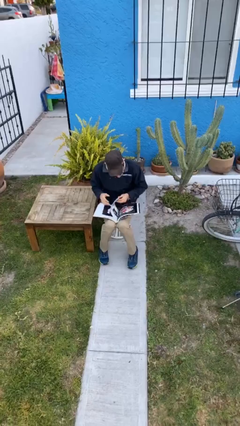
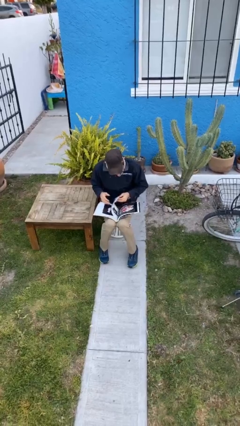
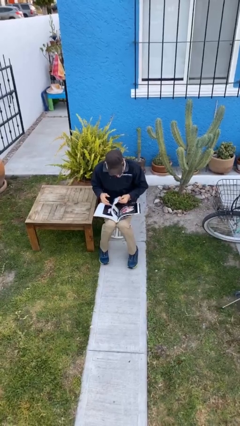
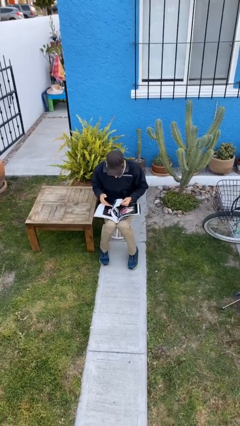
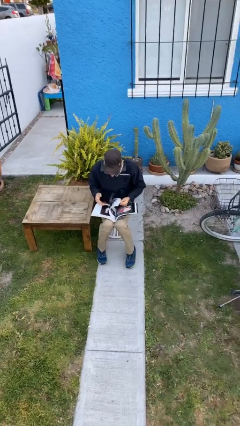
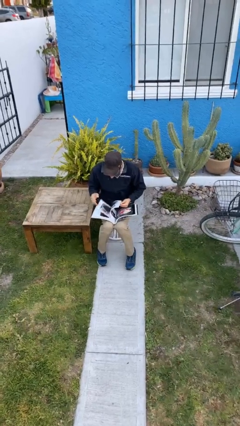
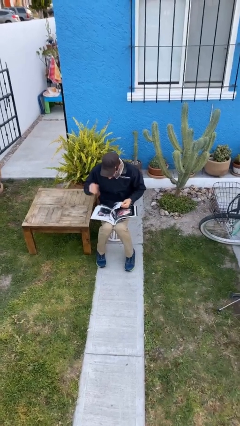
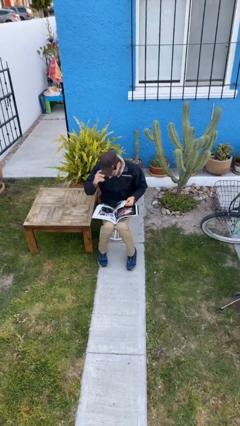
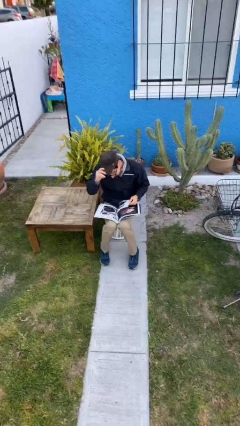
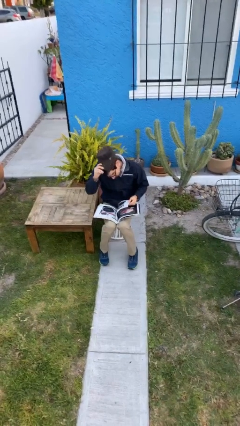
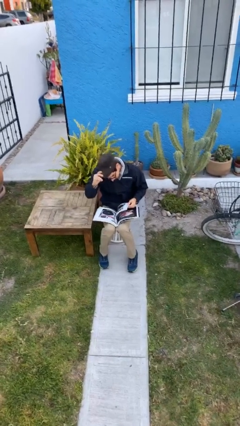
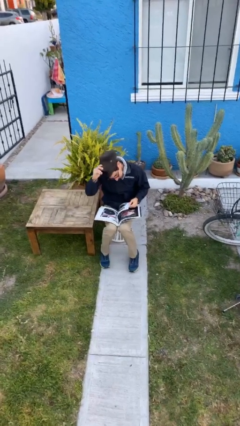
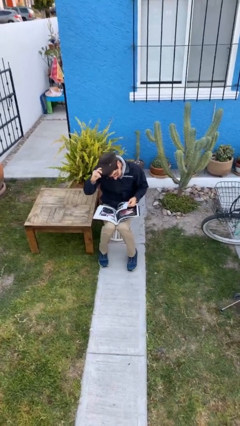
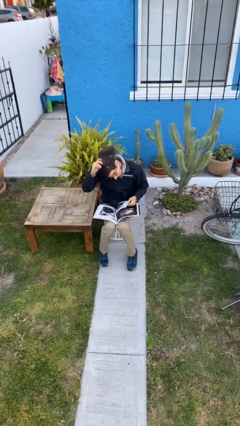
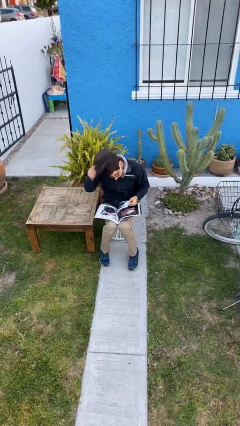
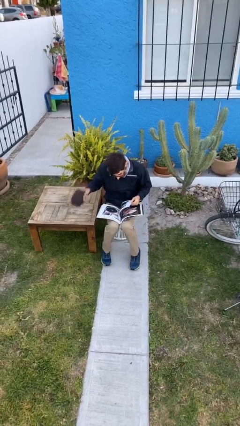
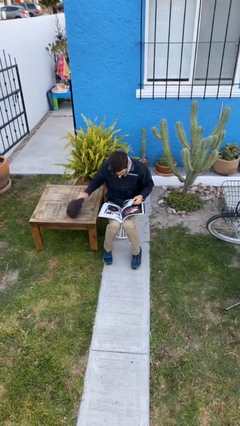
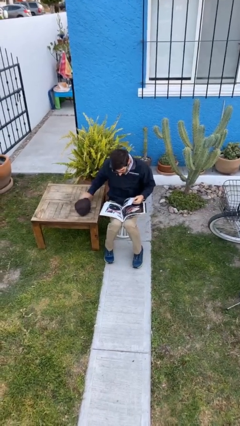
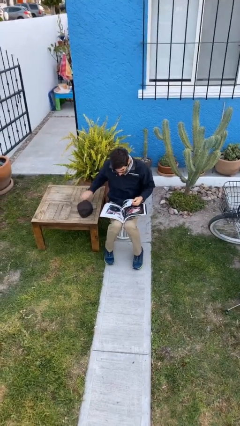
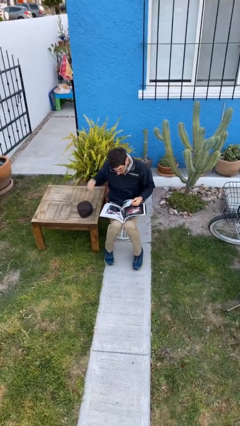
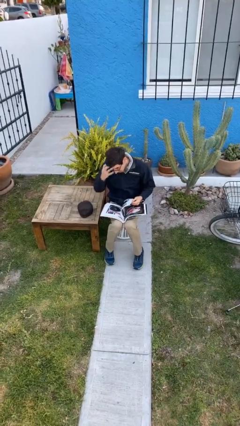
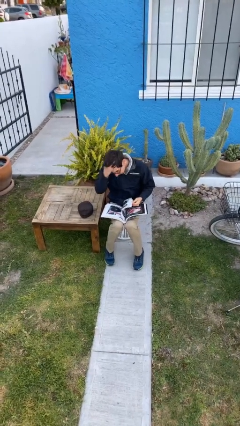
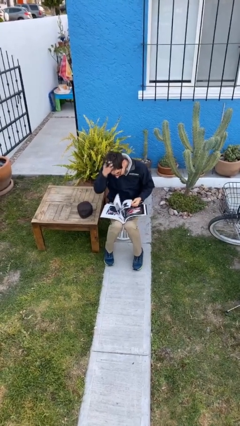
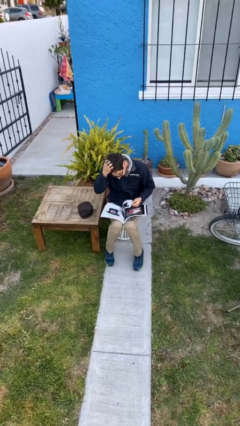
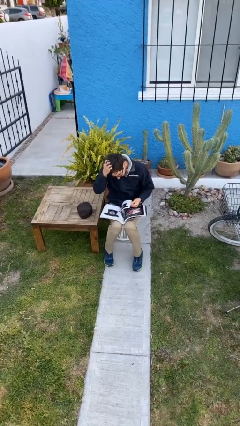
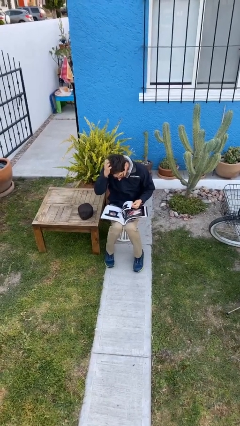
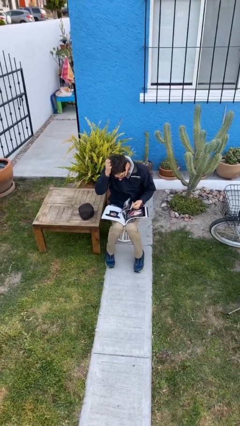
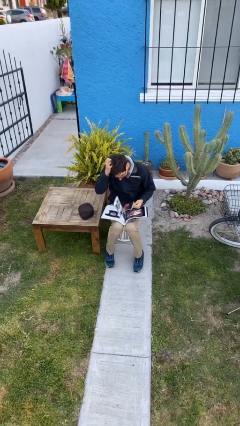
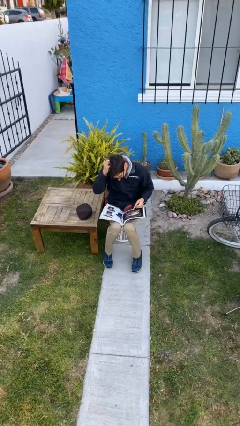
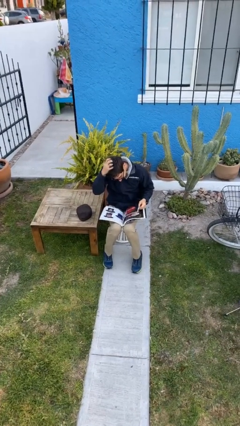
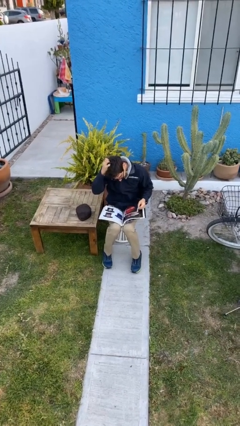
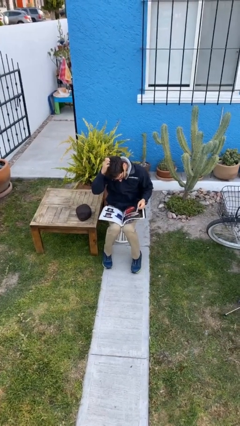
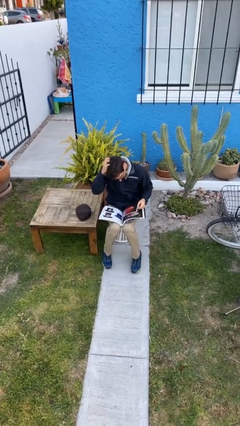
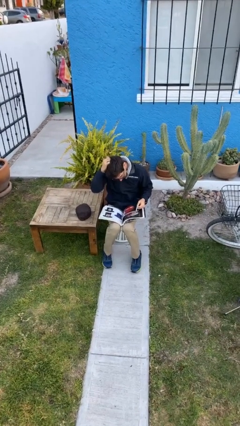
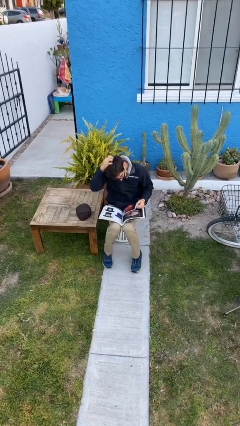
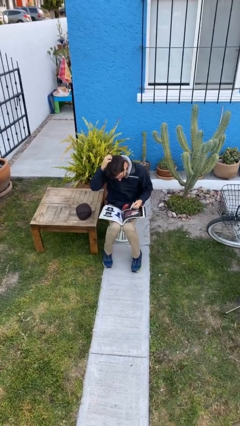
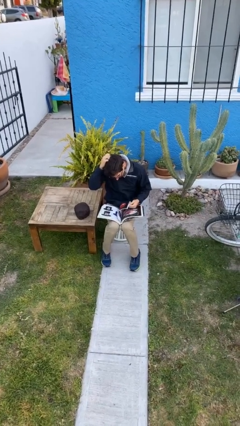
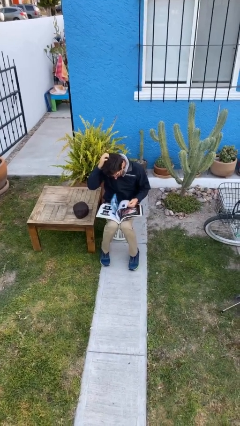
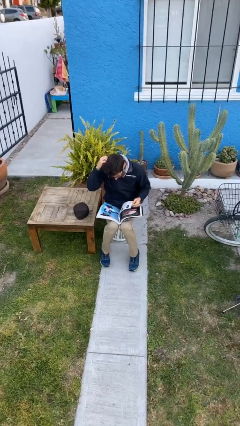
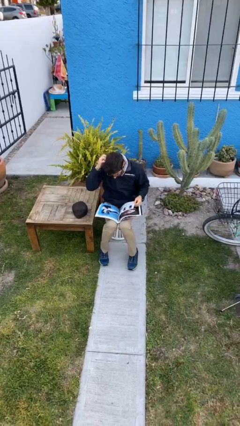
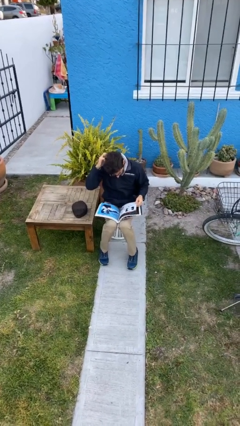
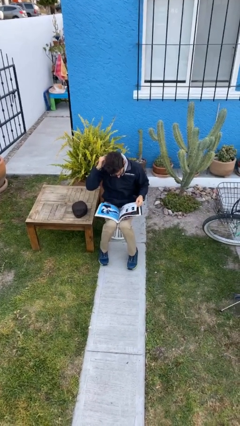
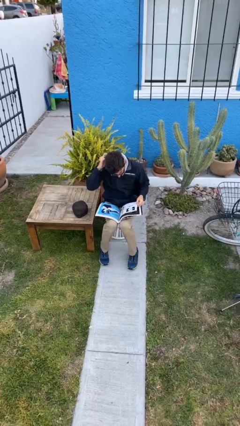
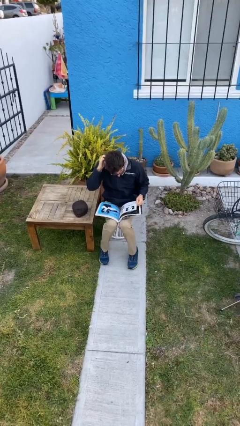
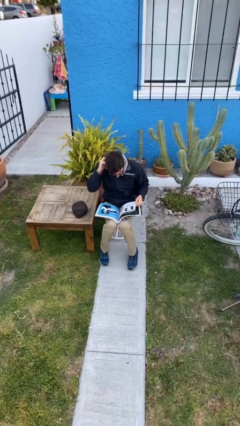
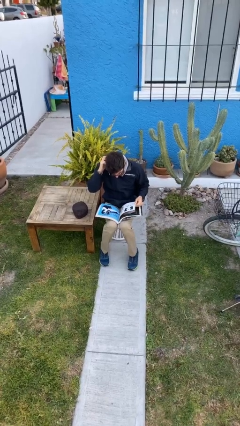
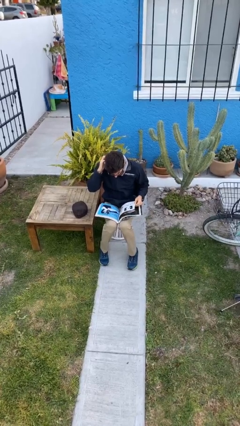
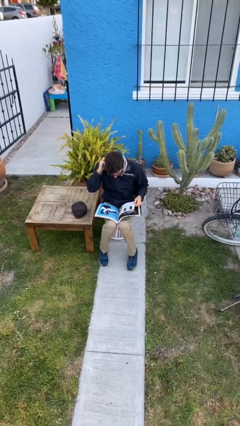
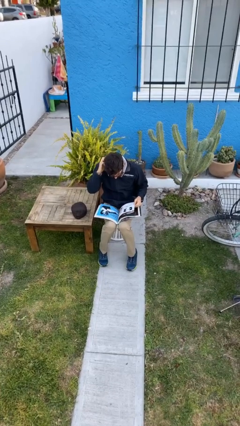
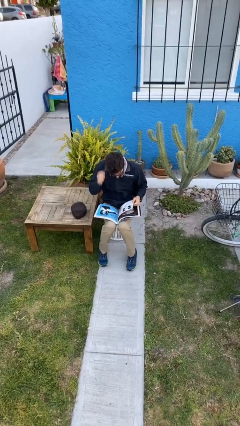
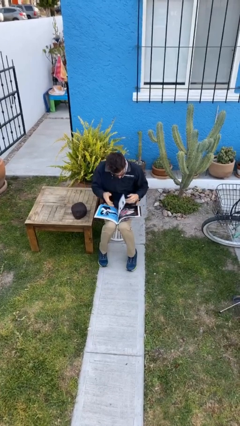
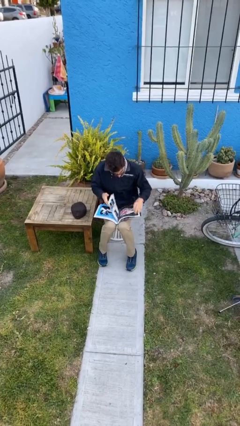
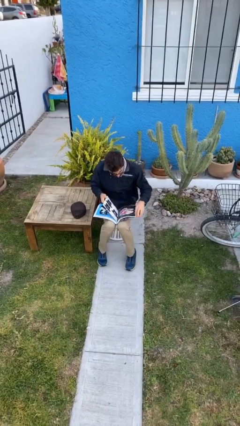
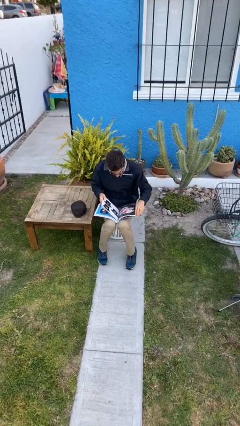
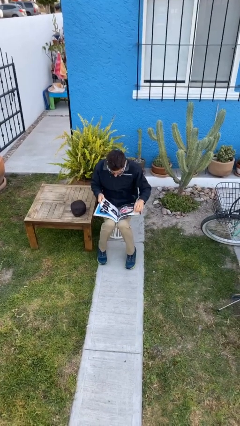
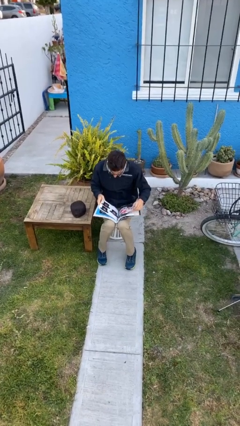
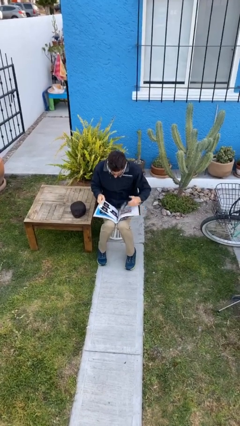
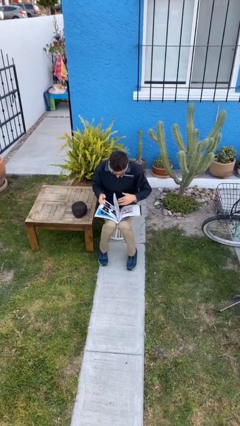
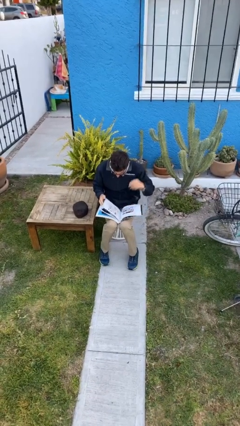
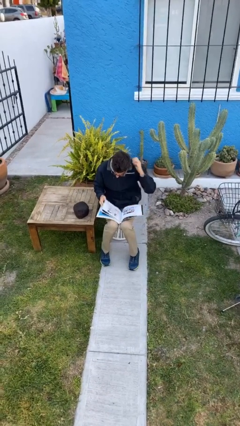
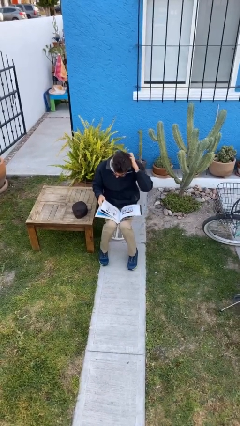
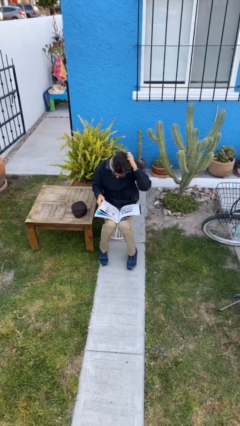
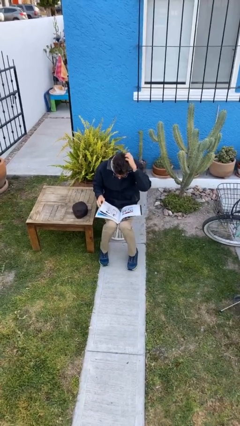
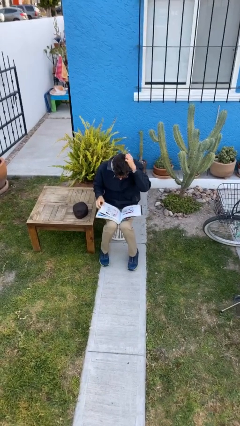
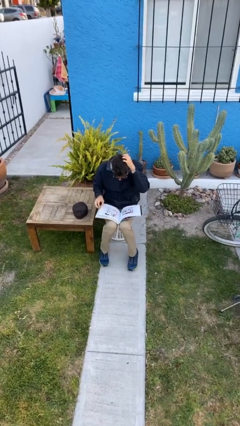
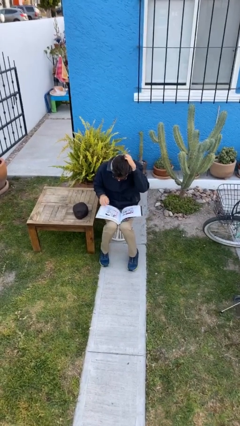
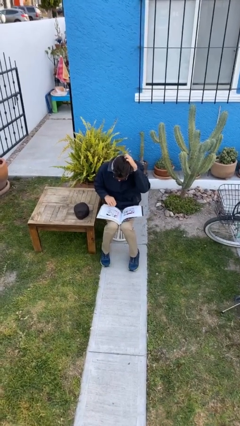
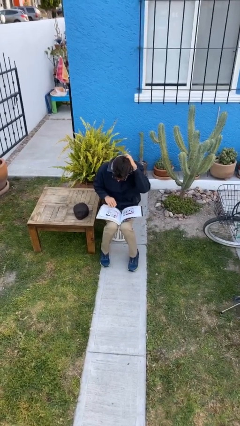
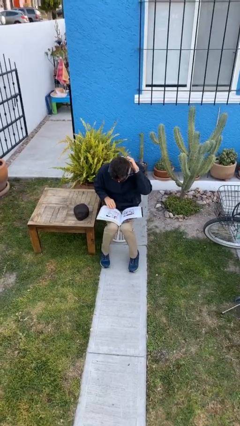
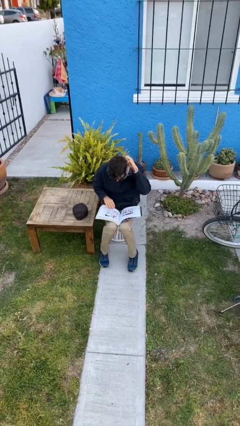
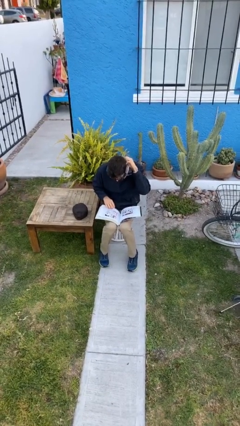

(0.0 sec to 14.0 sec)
person reads document

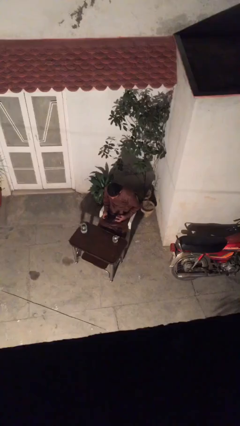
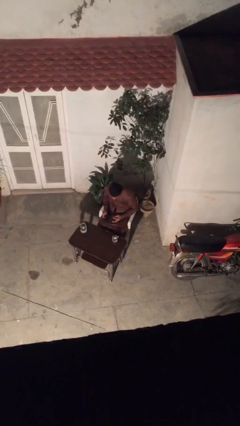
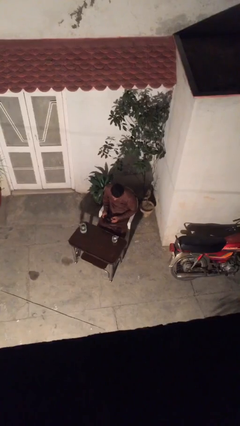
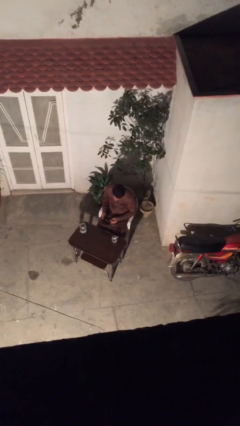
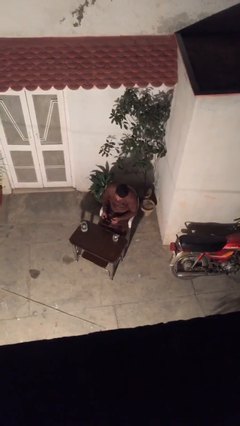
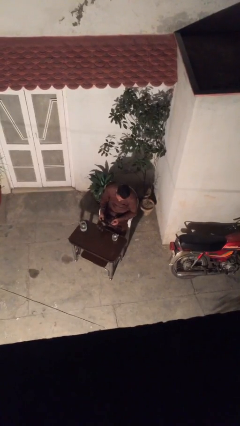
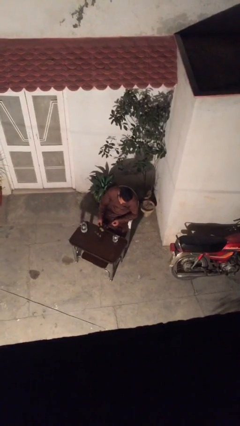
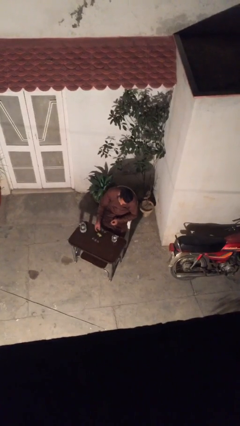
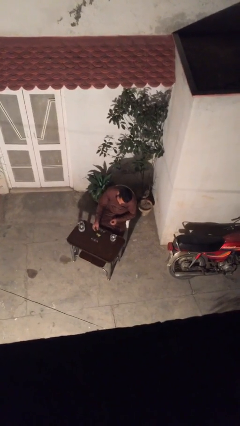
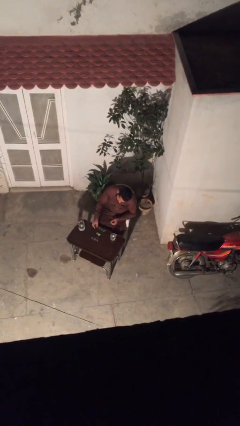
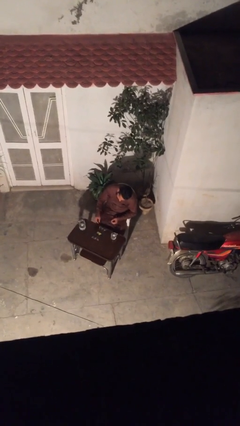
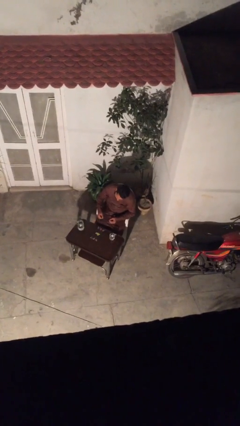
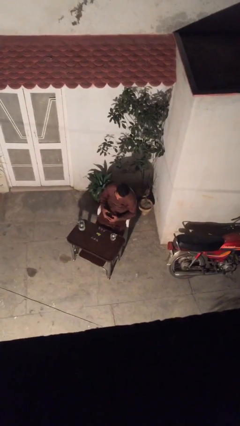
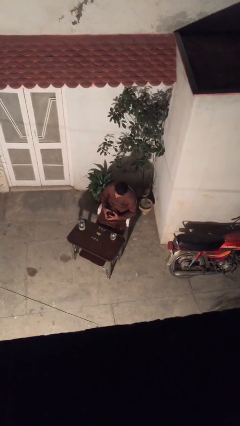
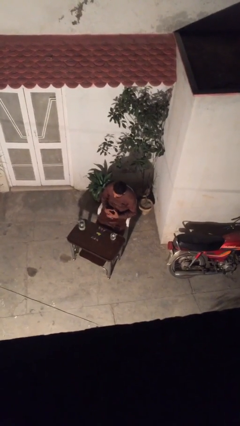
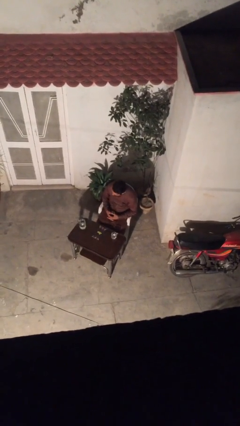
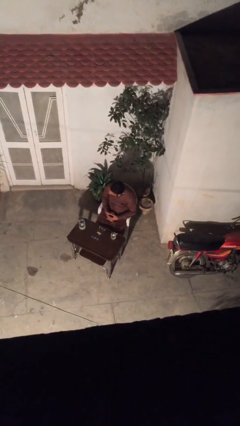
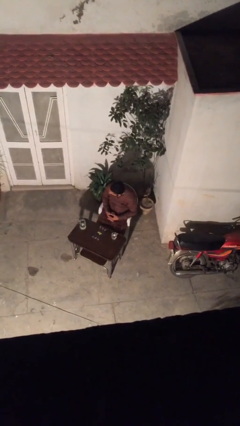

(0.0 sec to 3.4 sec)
person puts down object on table

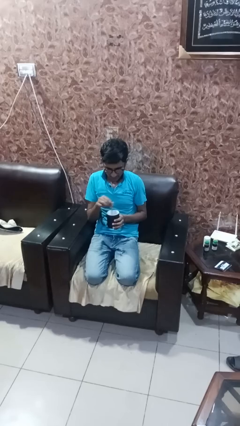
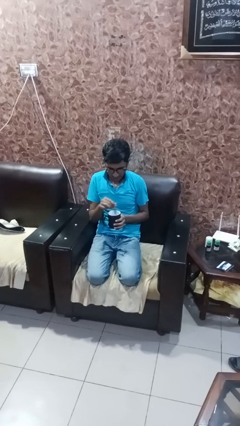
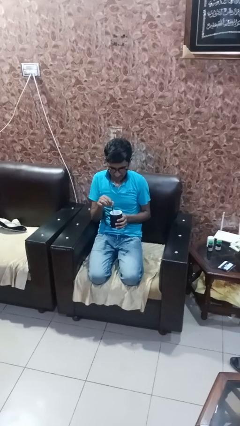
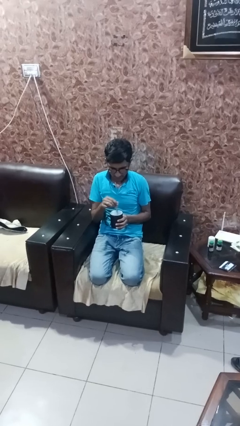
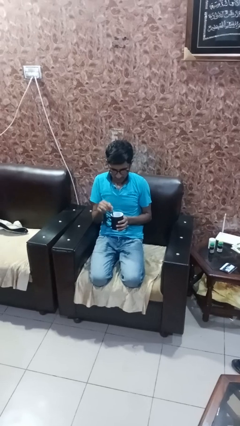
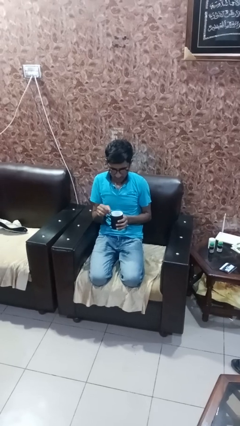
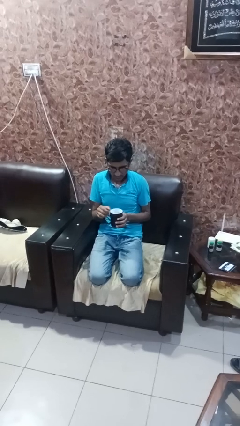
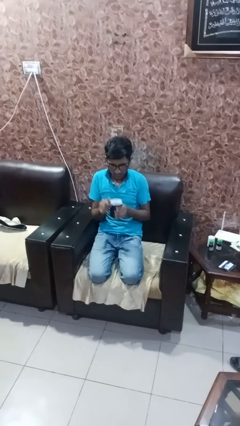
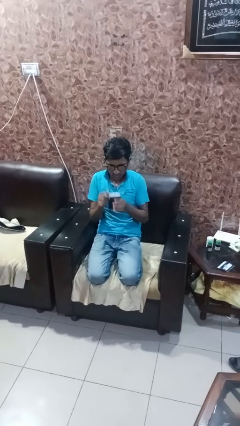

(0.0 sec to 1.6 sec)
person stirs mug
